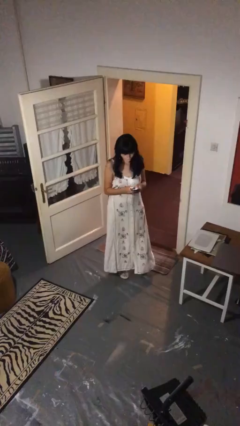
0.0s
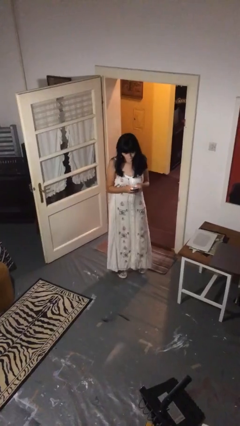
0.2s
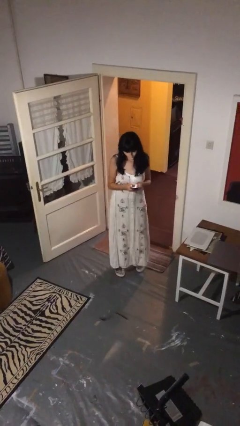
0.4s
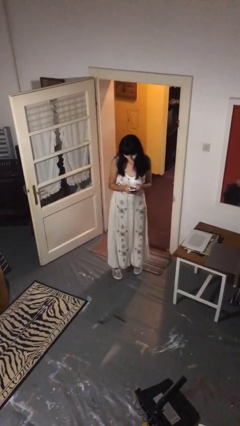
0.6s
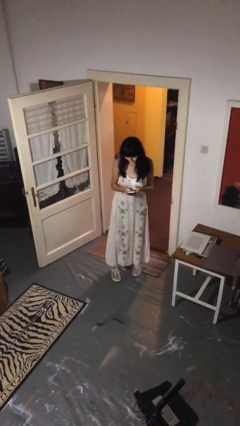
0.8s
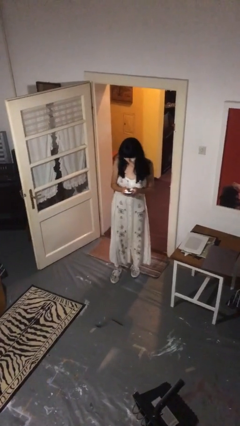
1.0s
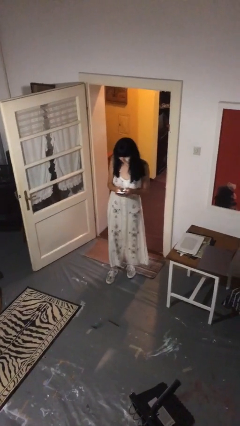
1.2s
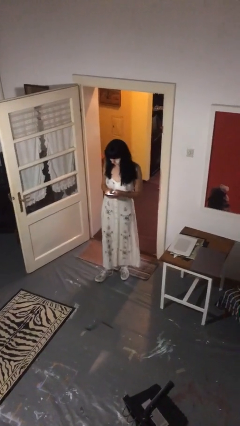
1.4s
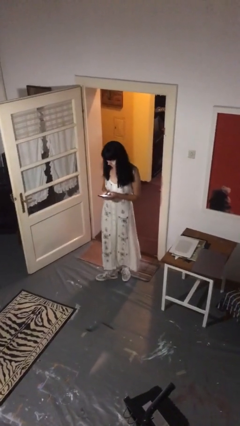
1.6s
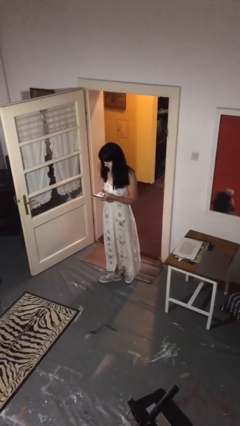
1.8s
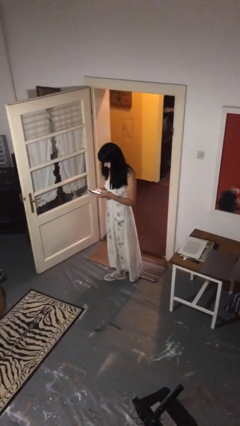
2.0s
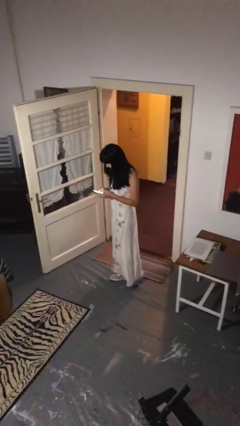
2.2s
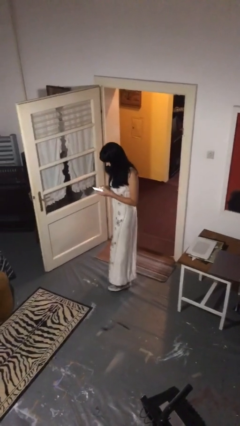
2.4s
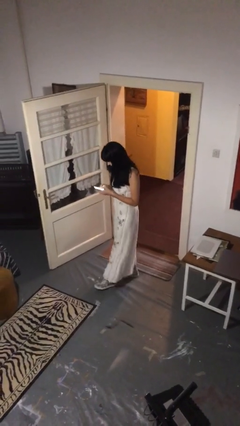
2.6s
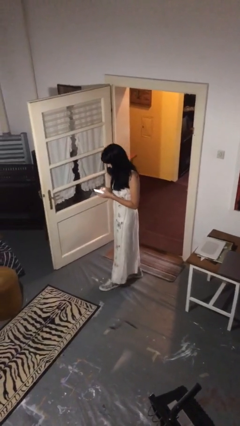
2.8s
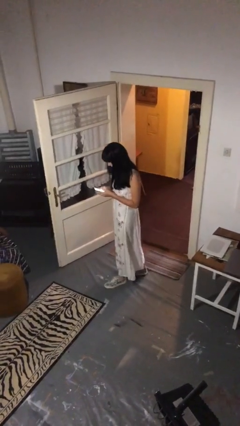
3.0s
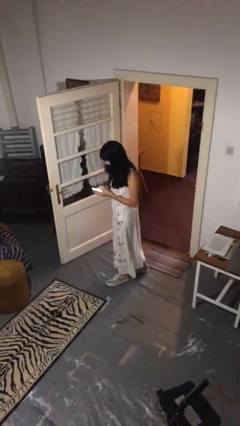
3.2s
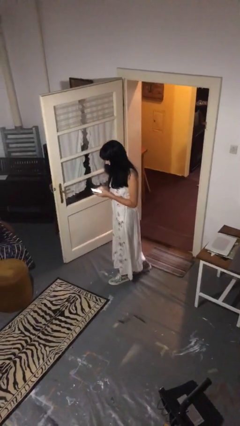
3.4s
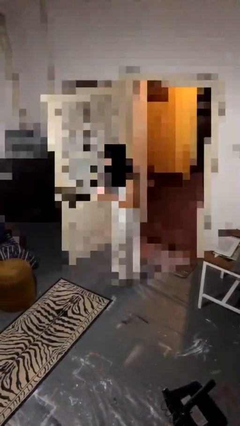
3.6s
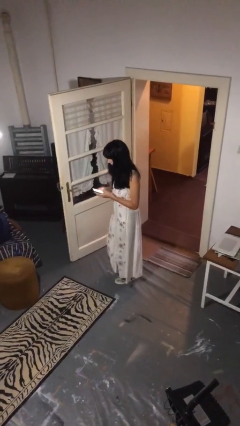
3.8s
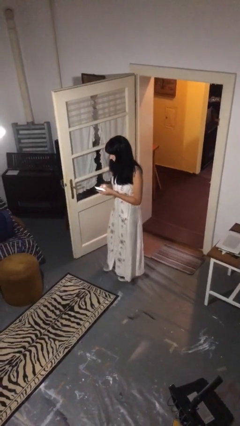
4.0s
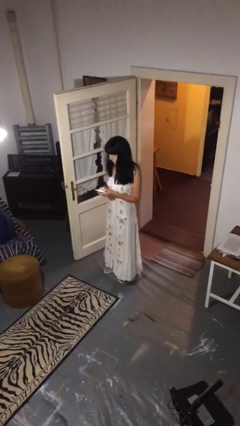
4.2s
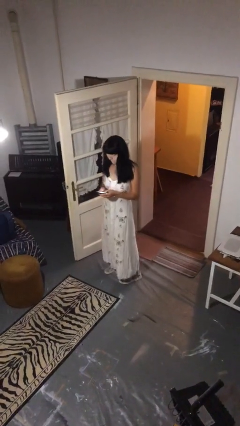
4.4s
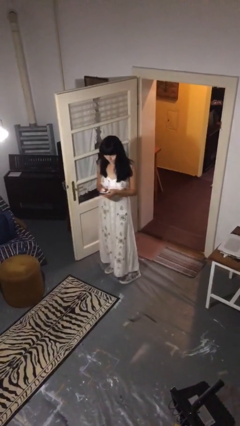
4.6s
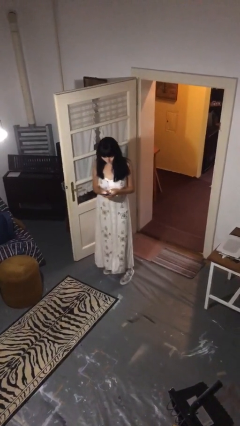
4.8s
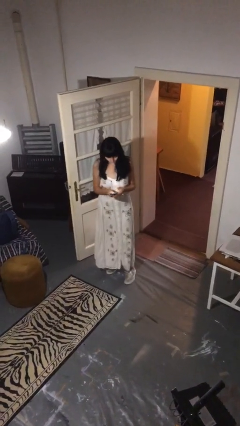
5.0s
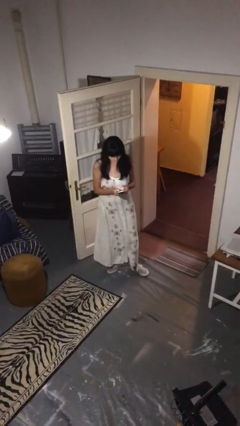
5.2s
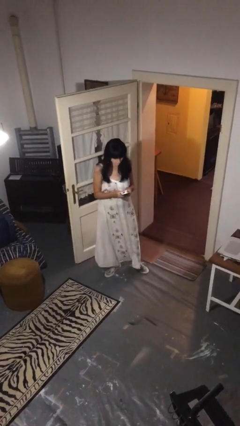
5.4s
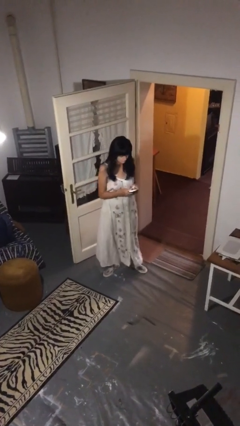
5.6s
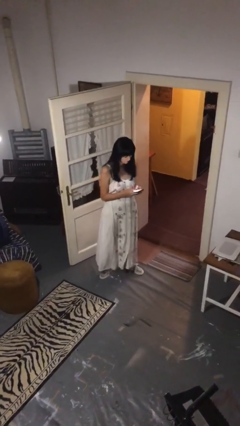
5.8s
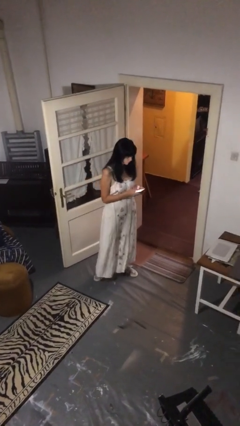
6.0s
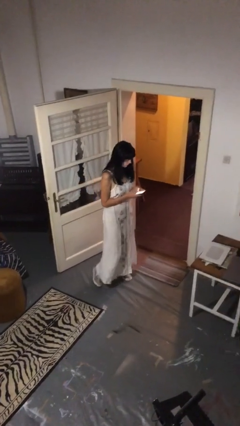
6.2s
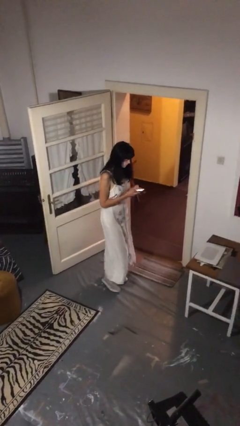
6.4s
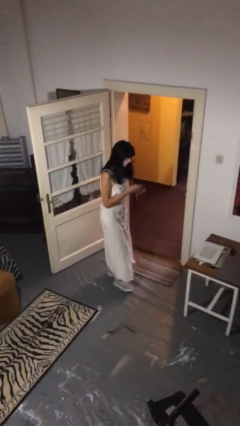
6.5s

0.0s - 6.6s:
person texts on phone

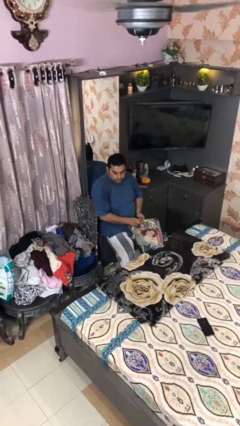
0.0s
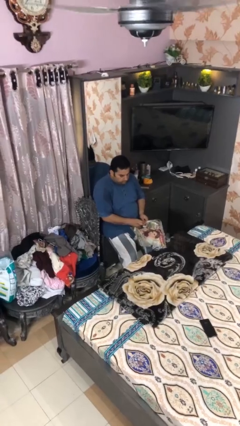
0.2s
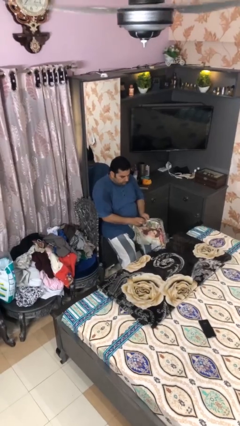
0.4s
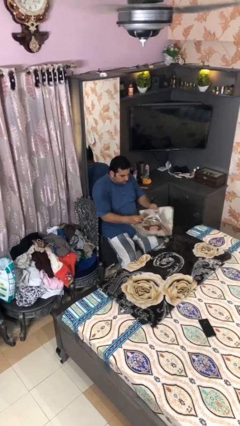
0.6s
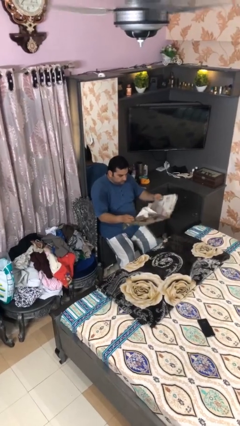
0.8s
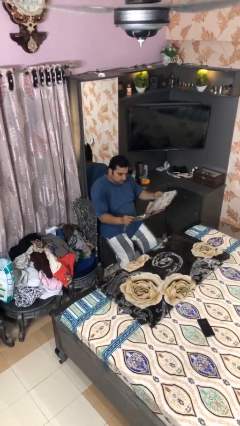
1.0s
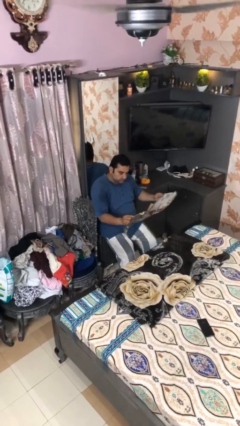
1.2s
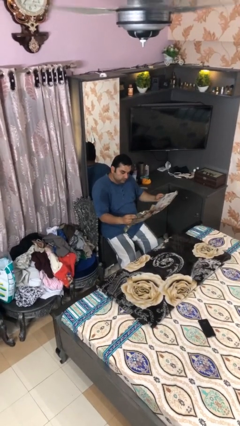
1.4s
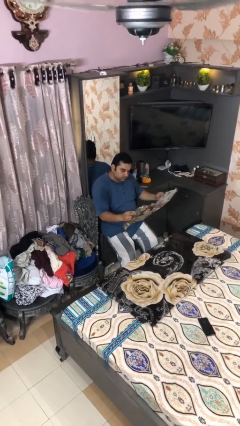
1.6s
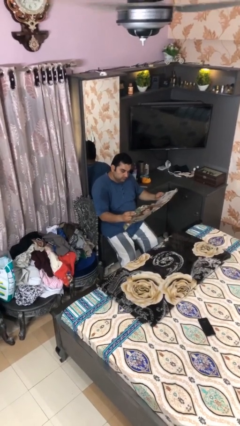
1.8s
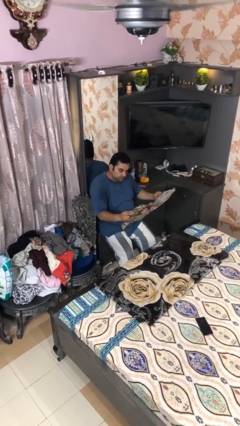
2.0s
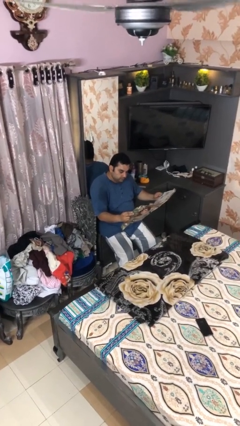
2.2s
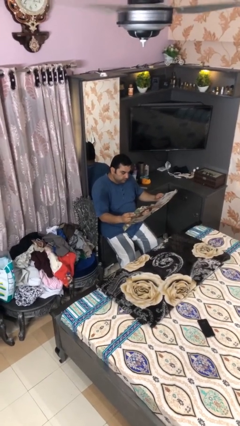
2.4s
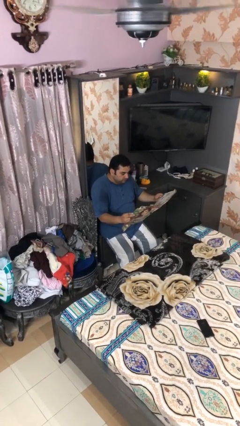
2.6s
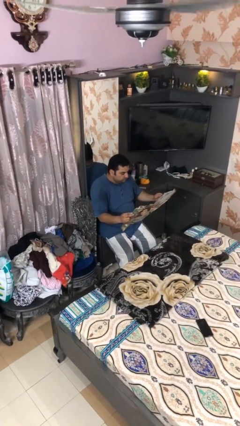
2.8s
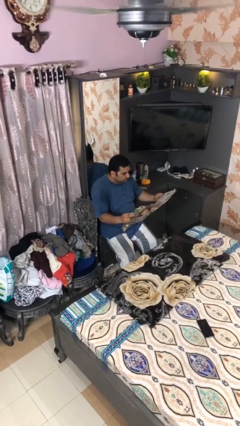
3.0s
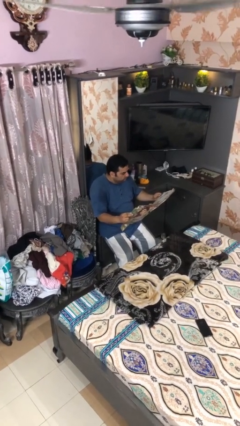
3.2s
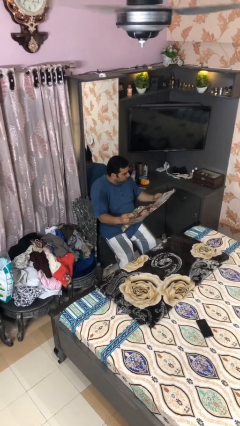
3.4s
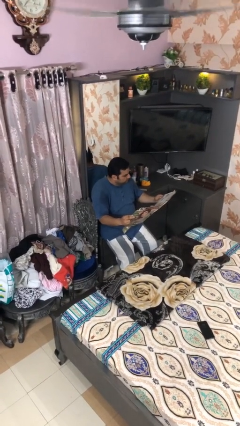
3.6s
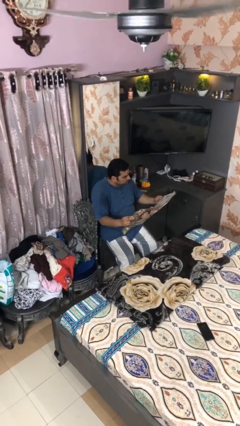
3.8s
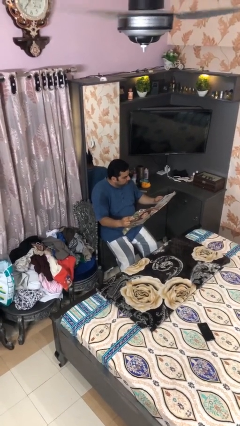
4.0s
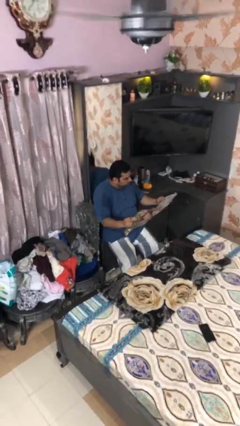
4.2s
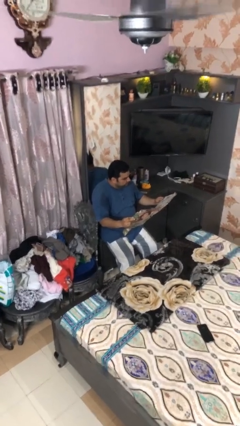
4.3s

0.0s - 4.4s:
person reads magazine

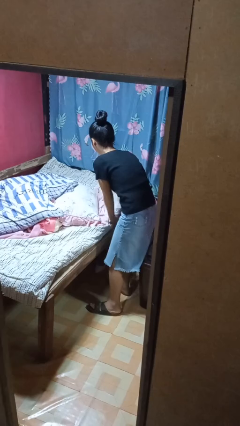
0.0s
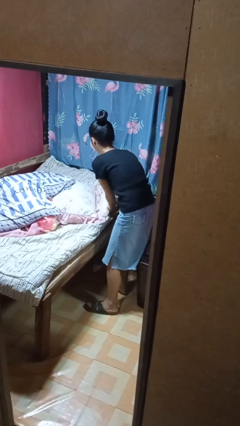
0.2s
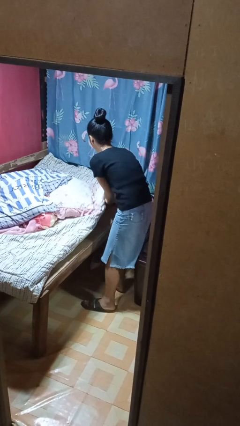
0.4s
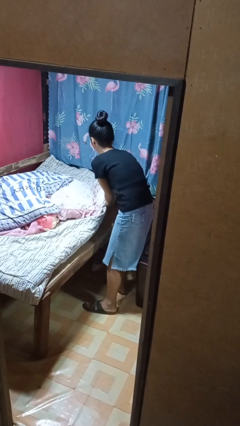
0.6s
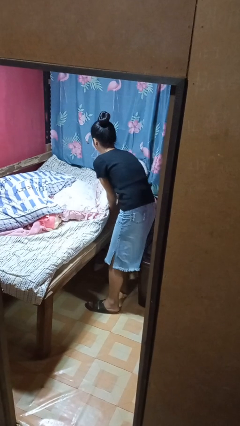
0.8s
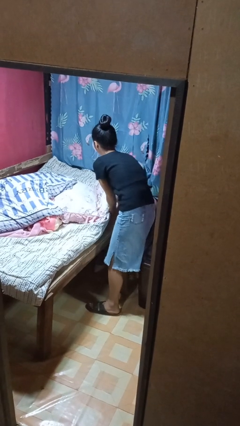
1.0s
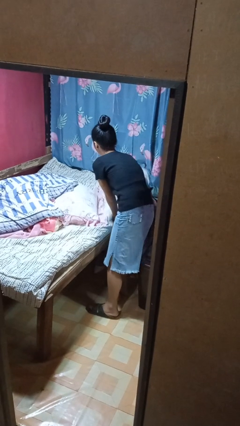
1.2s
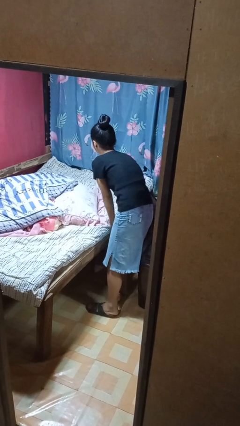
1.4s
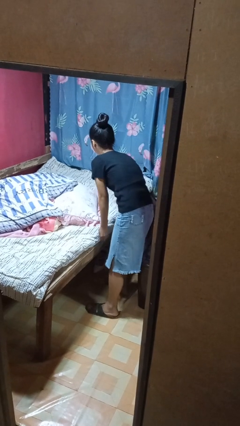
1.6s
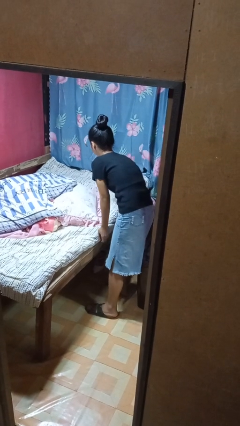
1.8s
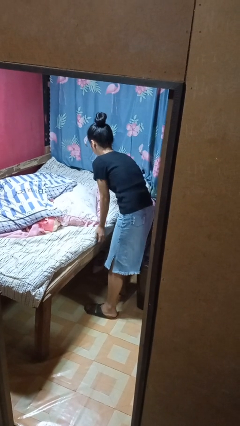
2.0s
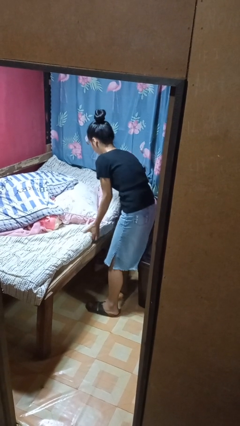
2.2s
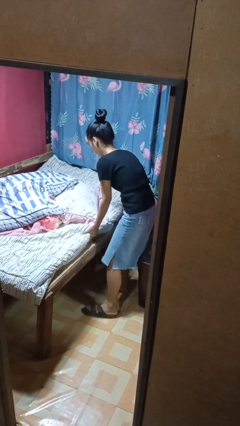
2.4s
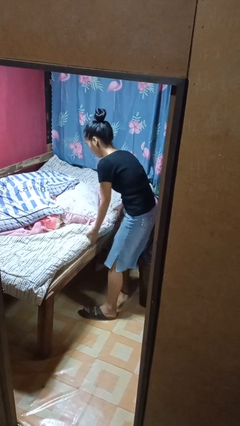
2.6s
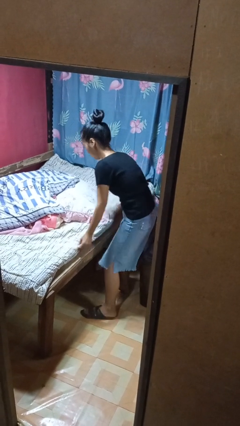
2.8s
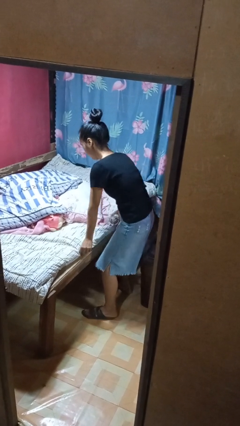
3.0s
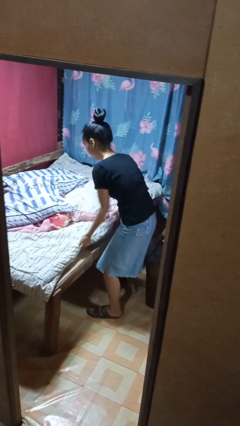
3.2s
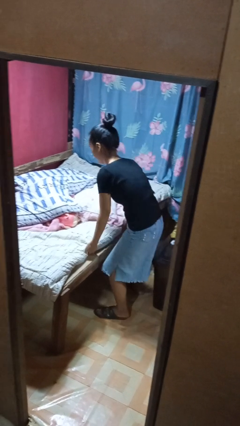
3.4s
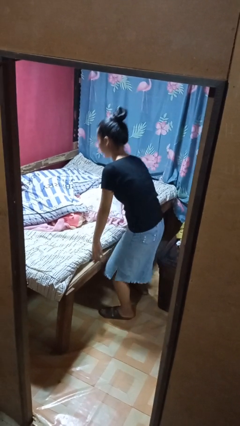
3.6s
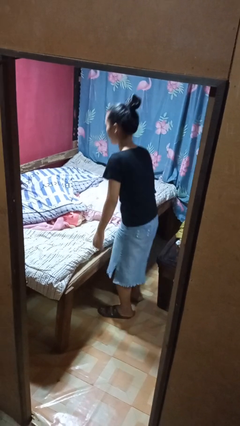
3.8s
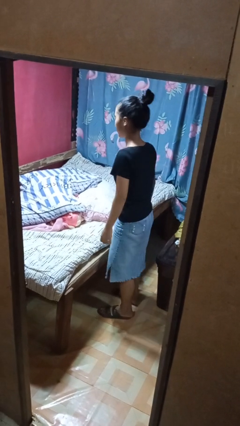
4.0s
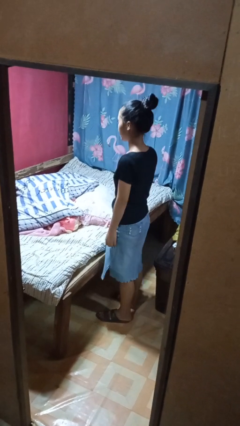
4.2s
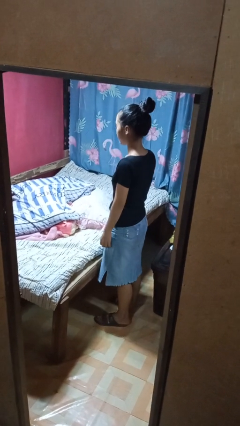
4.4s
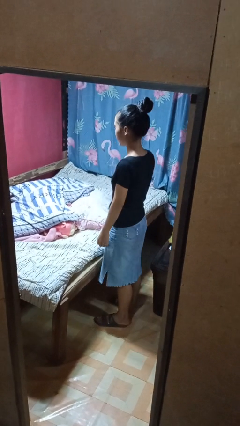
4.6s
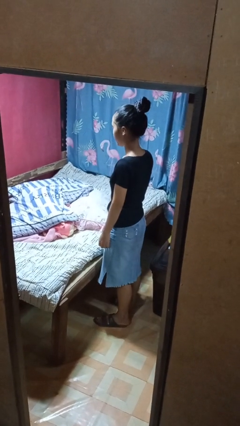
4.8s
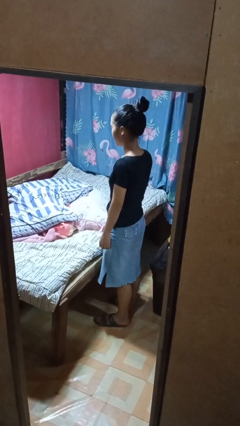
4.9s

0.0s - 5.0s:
person makes bed

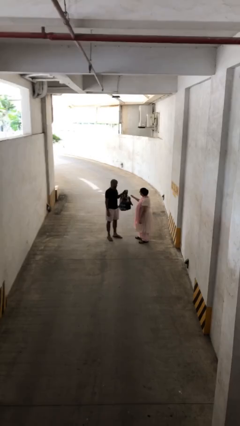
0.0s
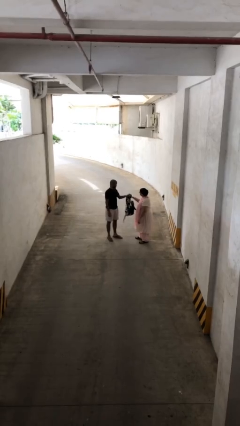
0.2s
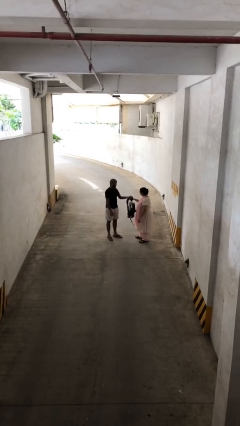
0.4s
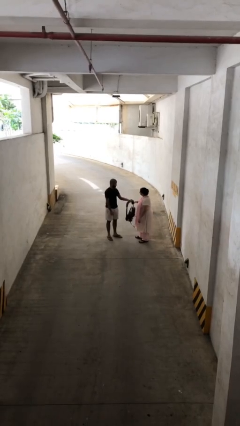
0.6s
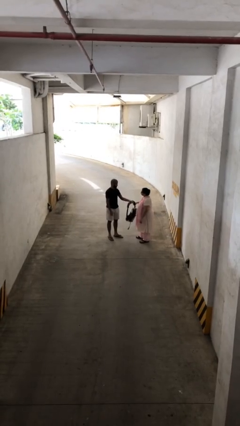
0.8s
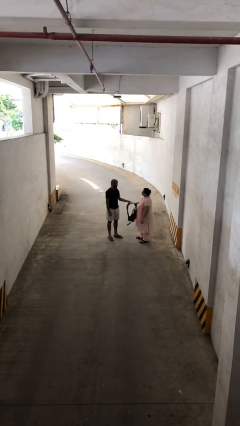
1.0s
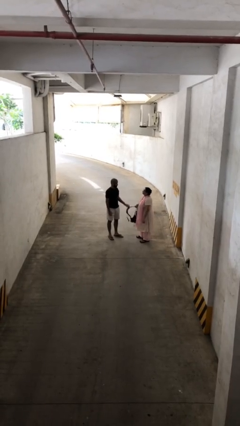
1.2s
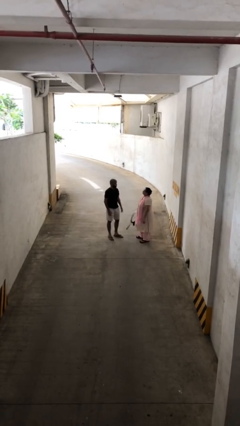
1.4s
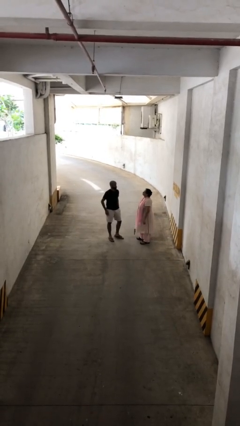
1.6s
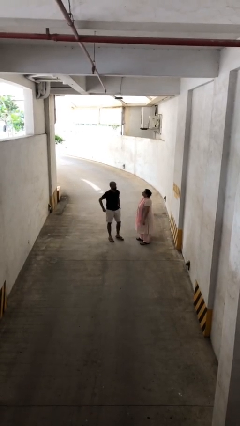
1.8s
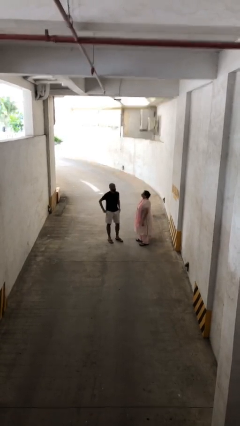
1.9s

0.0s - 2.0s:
person transfers object to person
